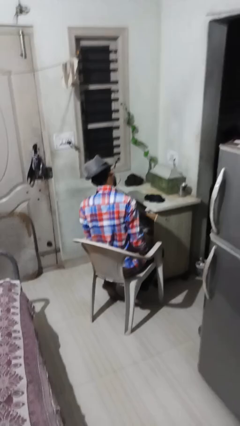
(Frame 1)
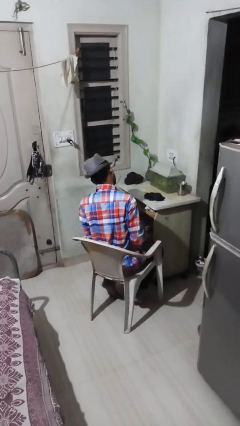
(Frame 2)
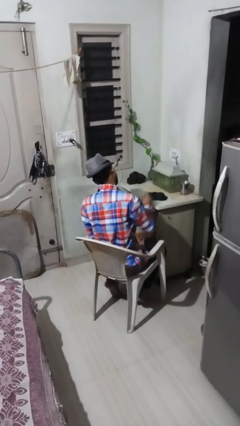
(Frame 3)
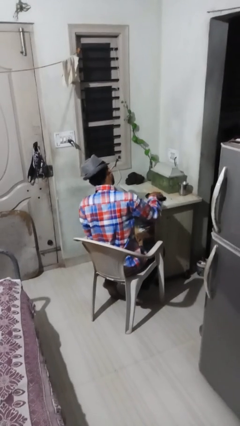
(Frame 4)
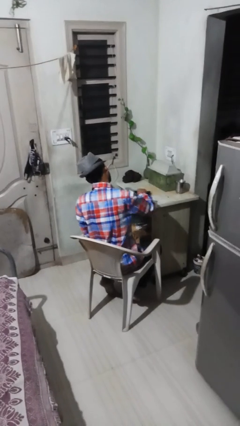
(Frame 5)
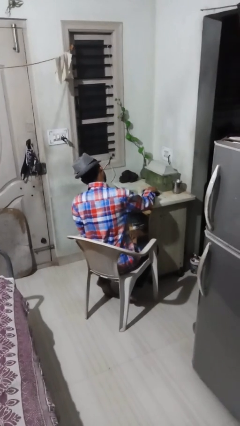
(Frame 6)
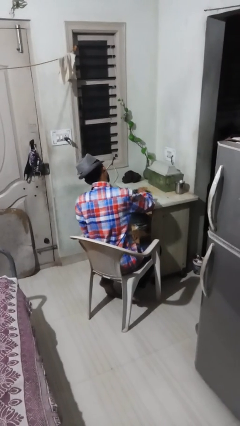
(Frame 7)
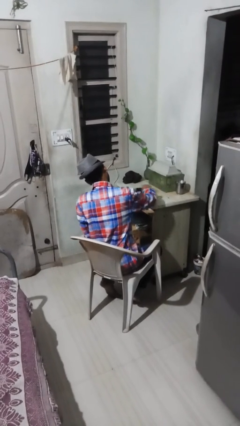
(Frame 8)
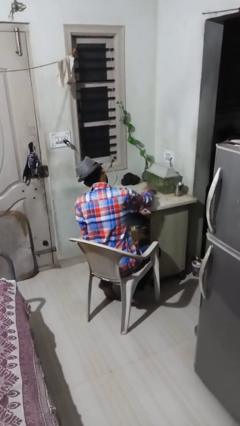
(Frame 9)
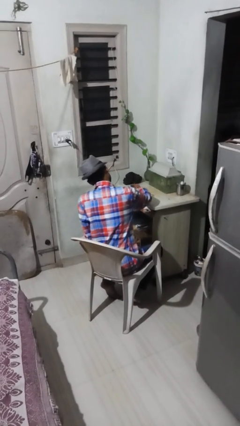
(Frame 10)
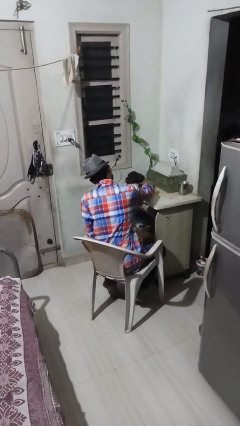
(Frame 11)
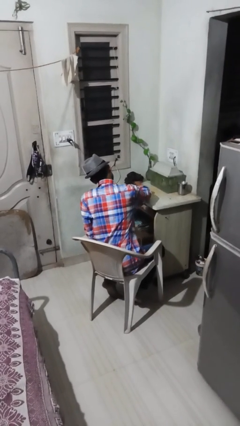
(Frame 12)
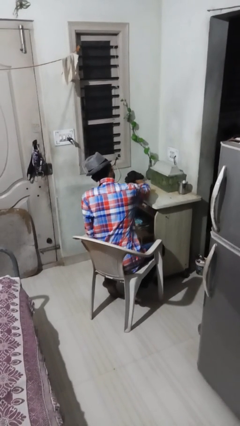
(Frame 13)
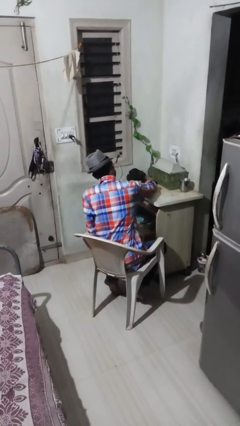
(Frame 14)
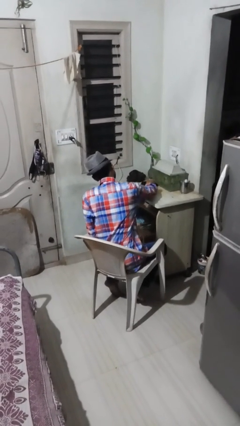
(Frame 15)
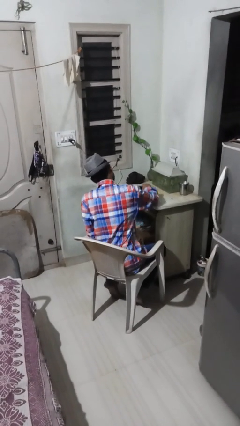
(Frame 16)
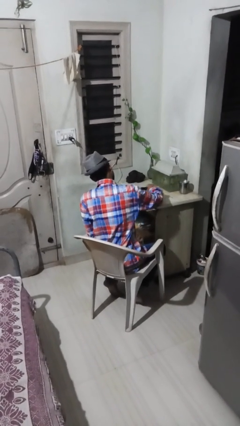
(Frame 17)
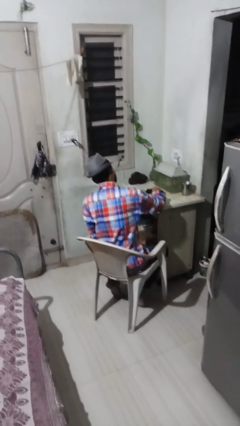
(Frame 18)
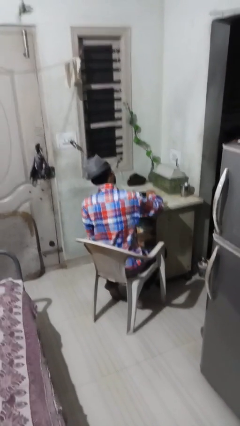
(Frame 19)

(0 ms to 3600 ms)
person cleans table with rag

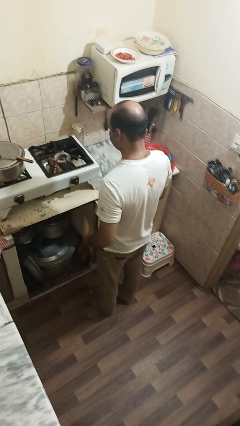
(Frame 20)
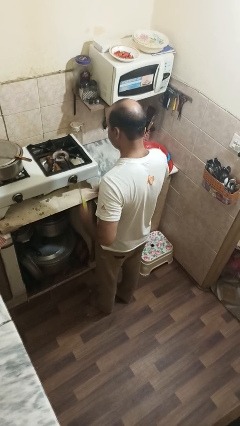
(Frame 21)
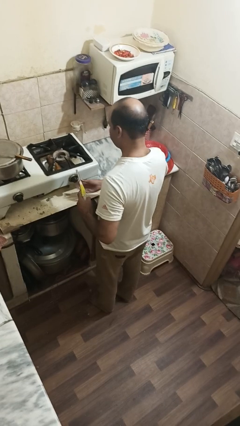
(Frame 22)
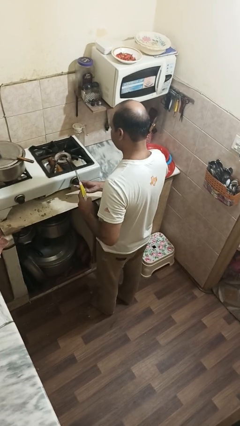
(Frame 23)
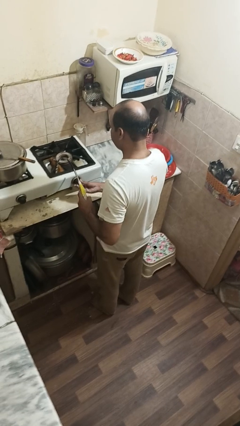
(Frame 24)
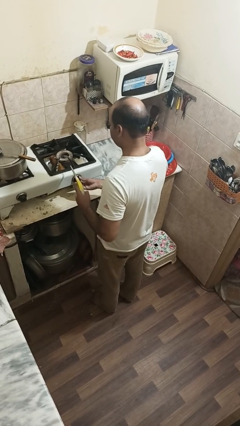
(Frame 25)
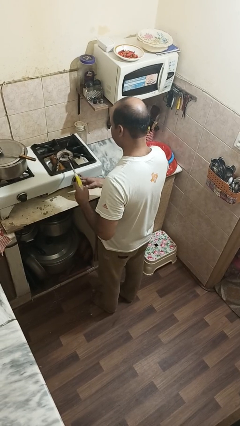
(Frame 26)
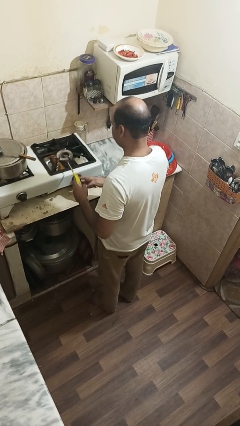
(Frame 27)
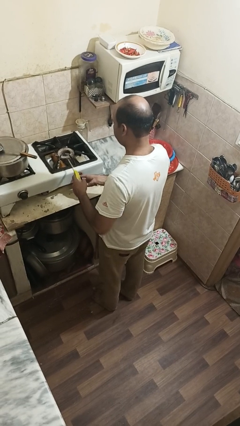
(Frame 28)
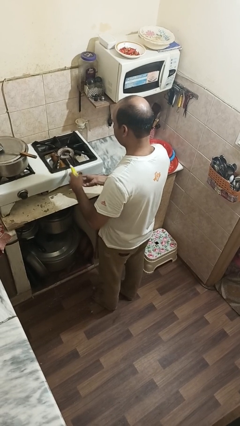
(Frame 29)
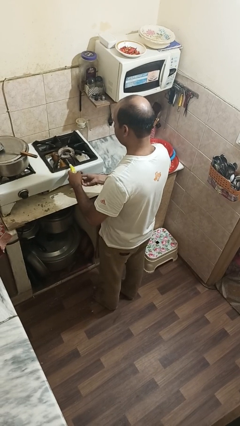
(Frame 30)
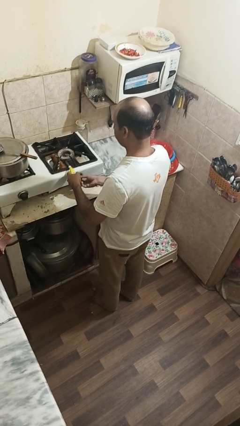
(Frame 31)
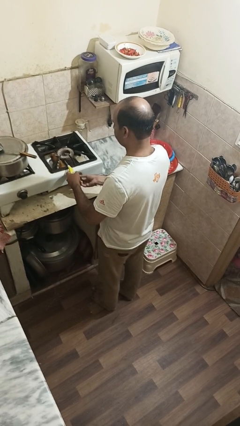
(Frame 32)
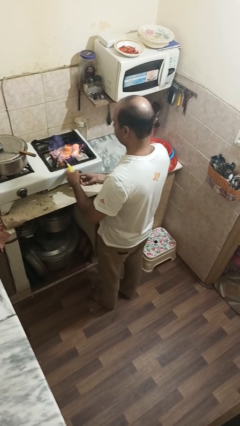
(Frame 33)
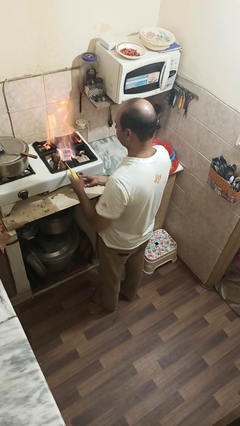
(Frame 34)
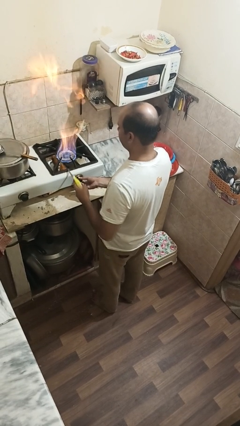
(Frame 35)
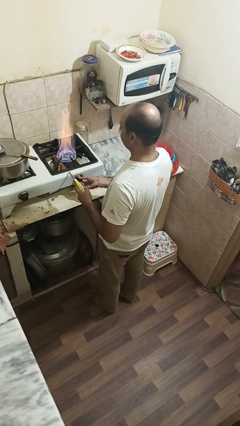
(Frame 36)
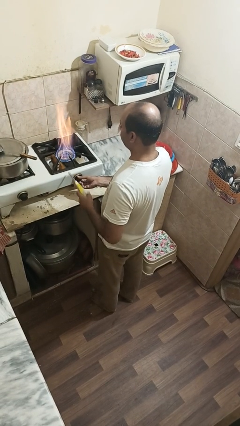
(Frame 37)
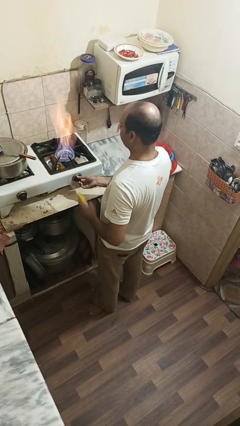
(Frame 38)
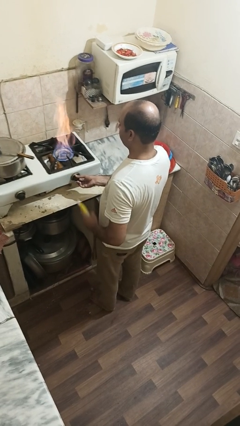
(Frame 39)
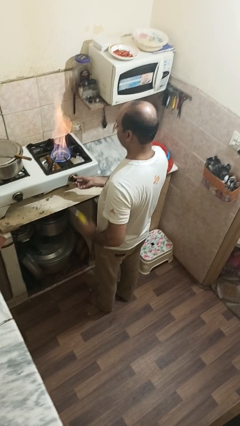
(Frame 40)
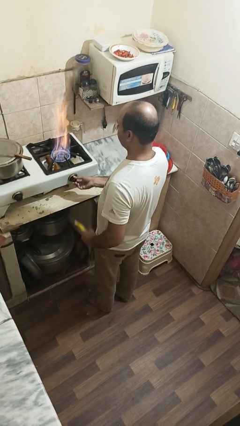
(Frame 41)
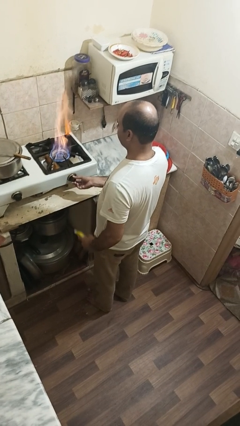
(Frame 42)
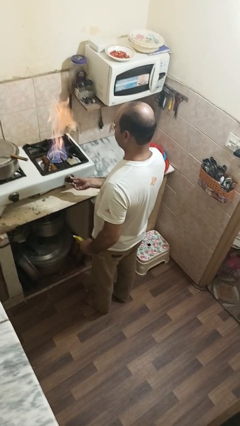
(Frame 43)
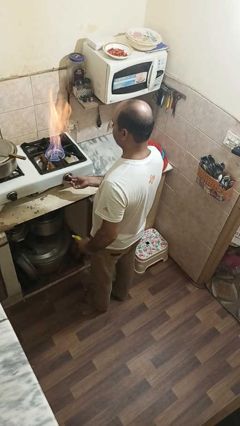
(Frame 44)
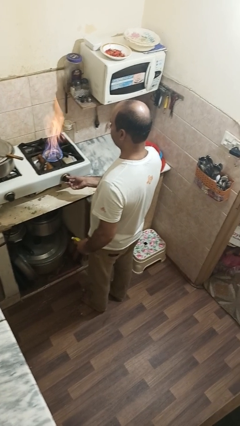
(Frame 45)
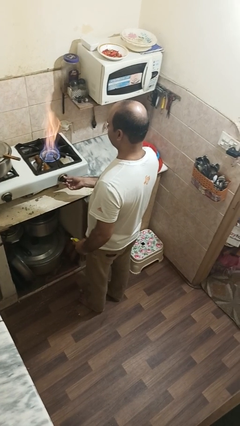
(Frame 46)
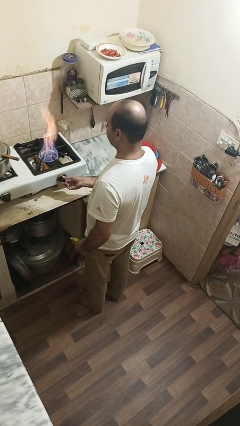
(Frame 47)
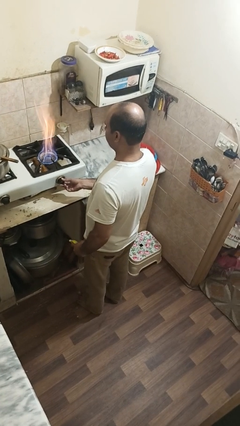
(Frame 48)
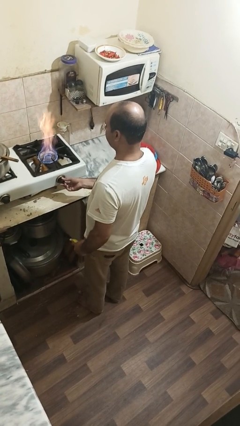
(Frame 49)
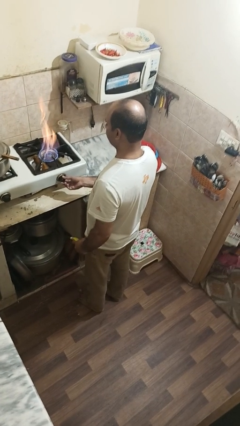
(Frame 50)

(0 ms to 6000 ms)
person turns on stovetop

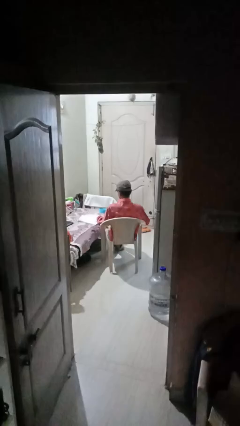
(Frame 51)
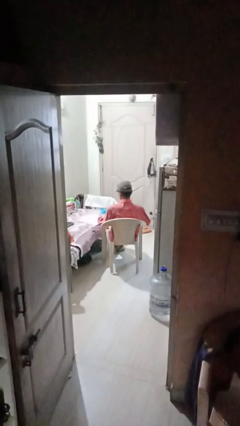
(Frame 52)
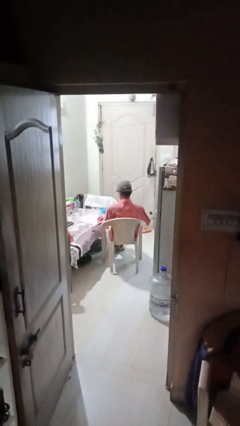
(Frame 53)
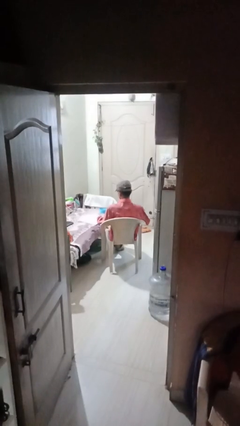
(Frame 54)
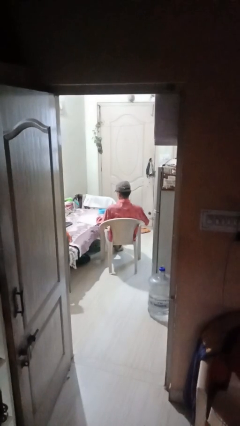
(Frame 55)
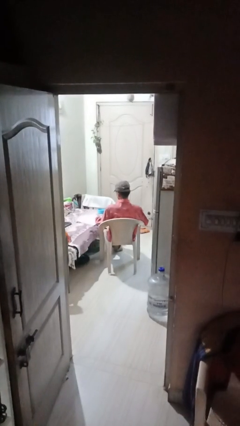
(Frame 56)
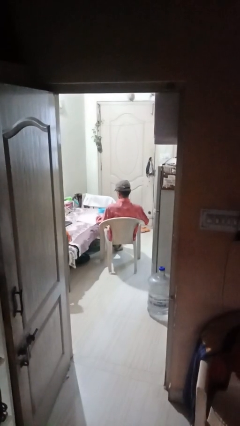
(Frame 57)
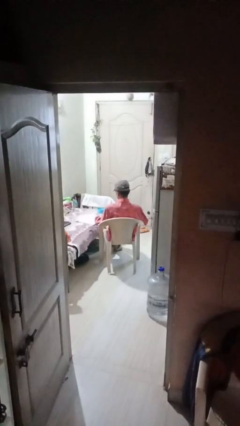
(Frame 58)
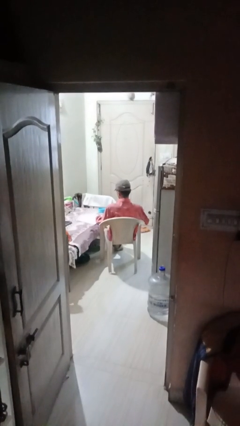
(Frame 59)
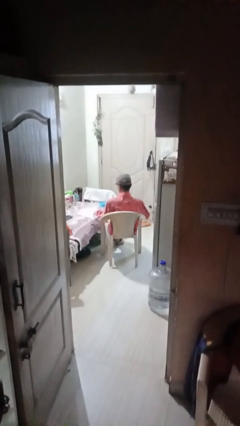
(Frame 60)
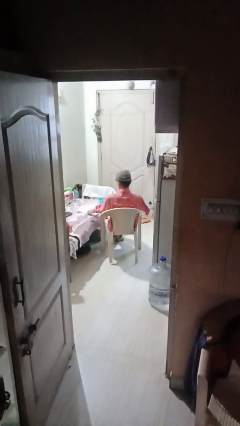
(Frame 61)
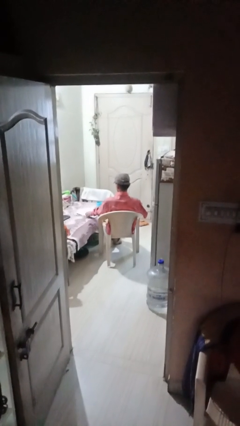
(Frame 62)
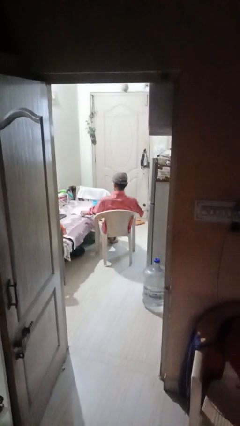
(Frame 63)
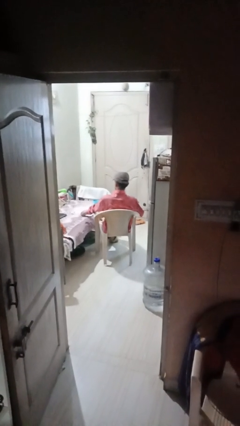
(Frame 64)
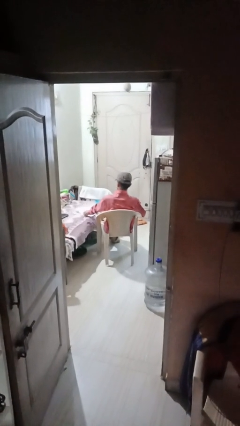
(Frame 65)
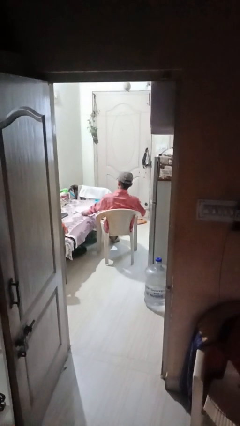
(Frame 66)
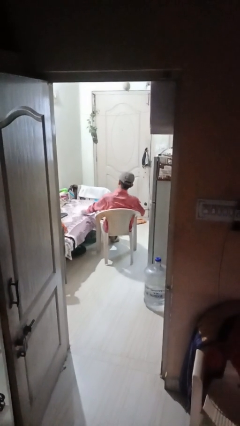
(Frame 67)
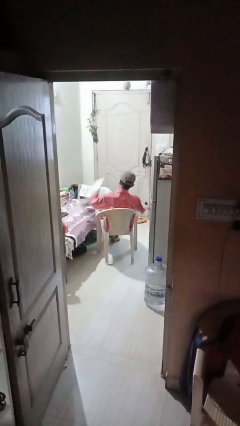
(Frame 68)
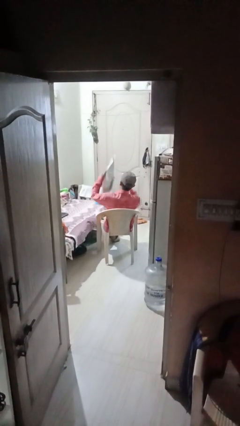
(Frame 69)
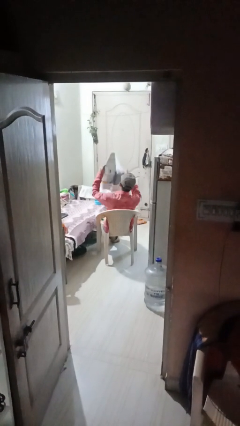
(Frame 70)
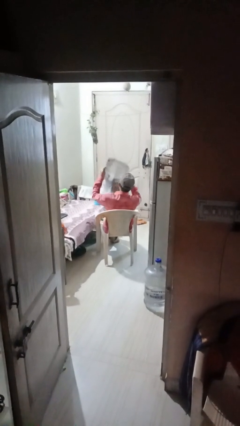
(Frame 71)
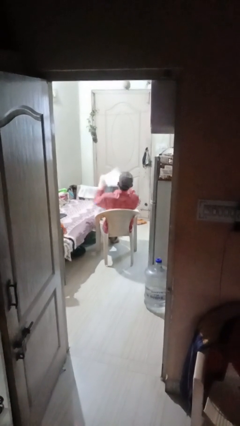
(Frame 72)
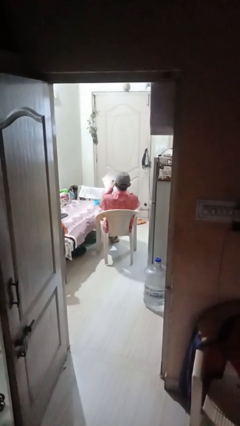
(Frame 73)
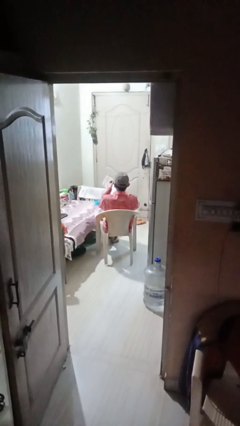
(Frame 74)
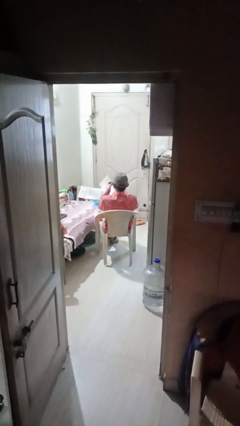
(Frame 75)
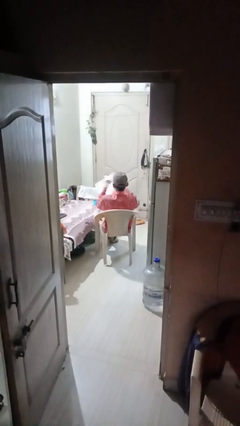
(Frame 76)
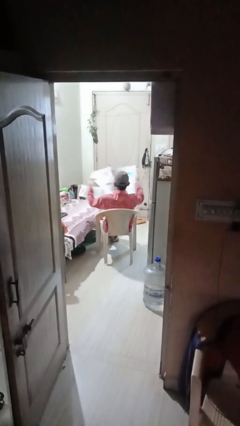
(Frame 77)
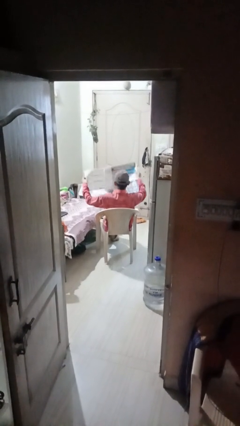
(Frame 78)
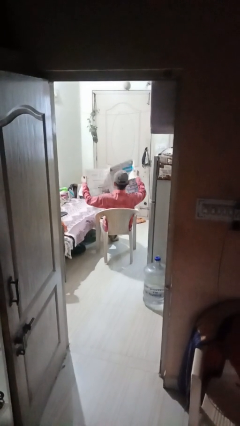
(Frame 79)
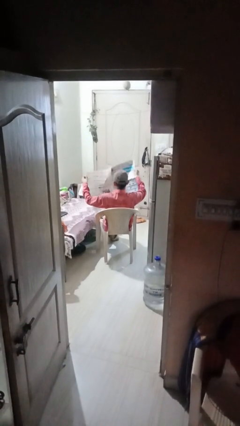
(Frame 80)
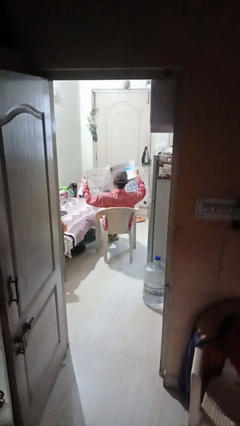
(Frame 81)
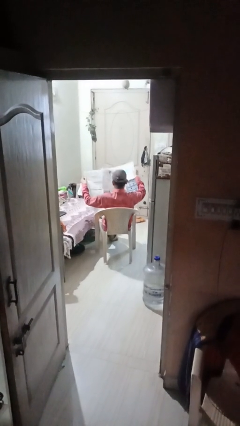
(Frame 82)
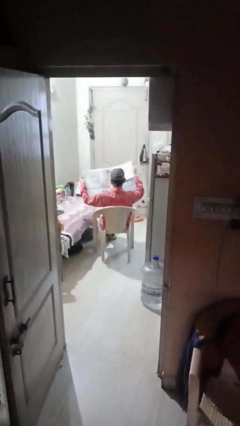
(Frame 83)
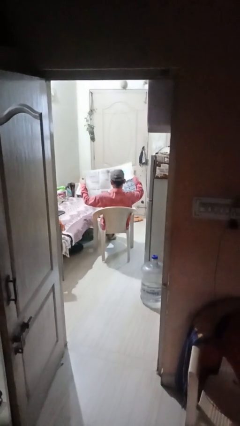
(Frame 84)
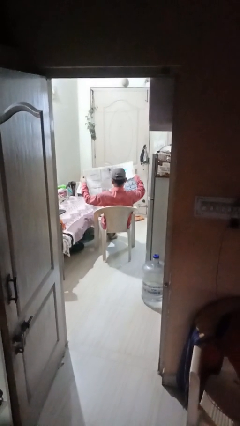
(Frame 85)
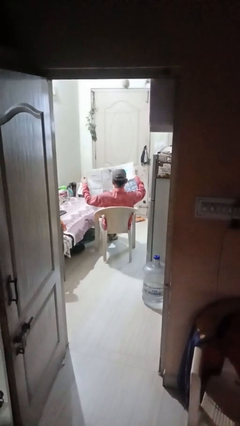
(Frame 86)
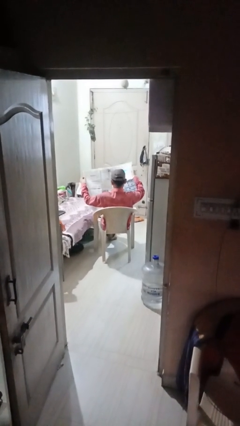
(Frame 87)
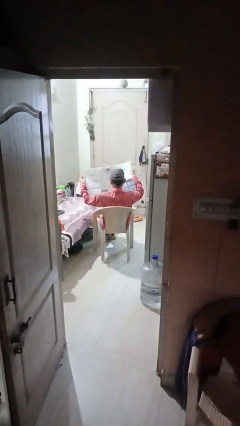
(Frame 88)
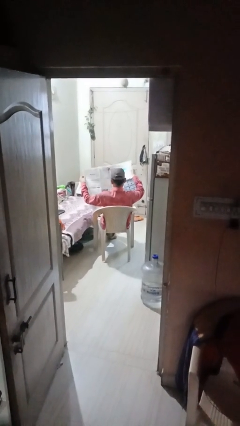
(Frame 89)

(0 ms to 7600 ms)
person reads newspaper

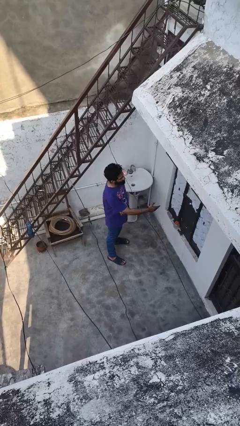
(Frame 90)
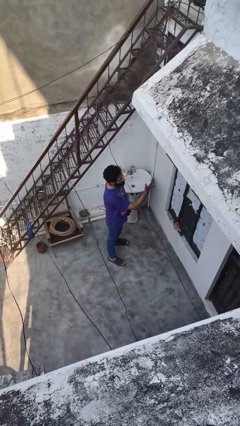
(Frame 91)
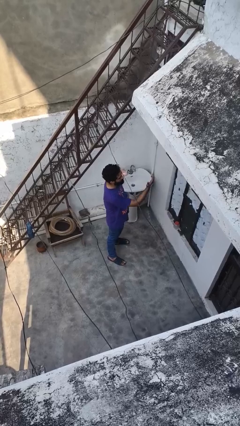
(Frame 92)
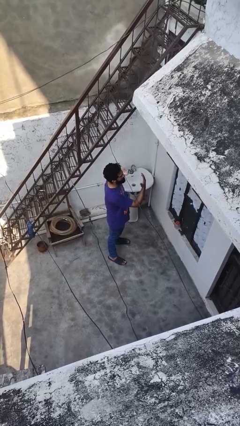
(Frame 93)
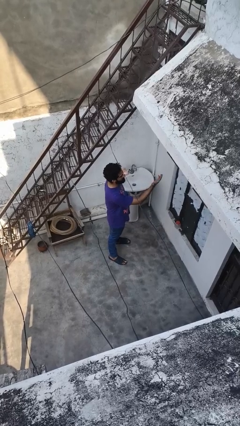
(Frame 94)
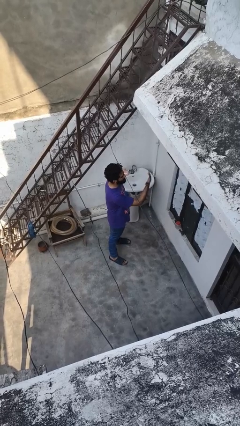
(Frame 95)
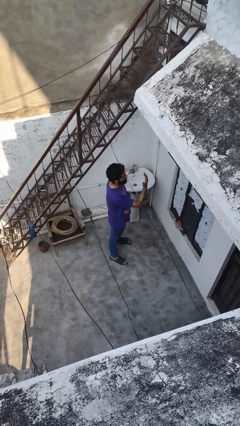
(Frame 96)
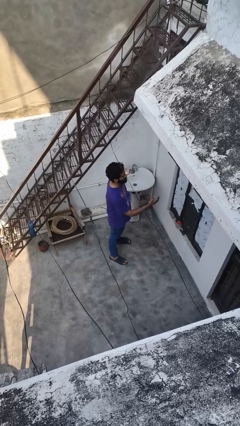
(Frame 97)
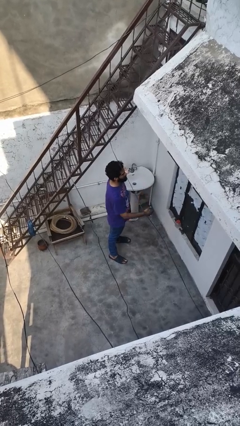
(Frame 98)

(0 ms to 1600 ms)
person gestures come here
